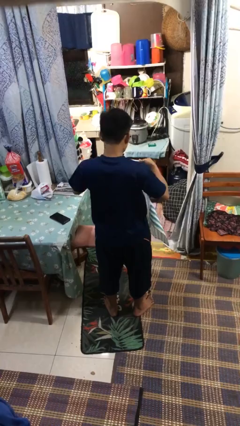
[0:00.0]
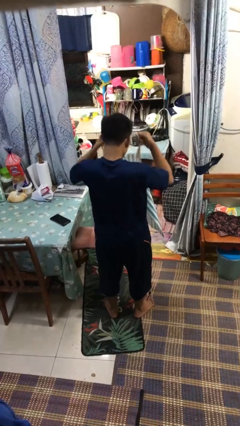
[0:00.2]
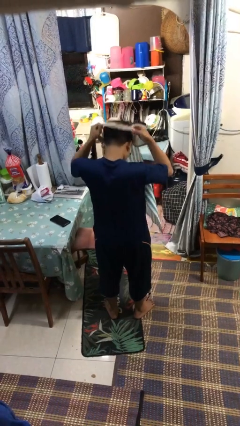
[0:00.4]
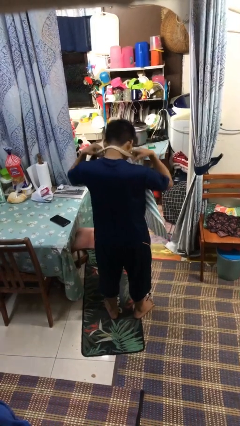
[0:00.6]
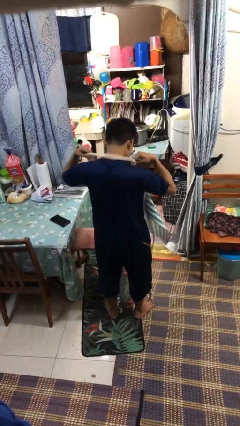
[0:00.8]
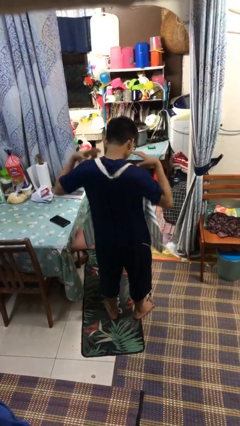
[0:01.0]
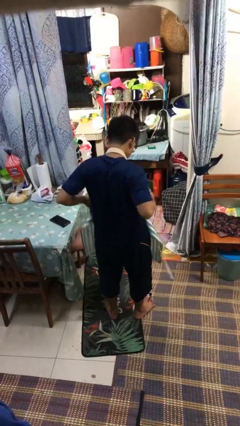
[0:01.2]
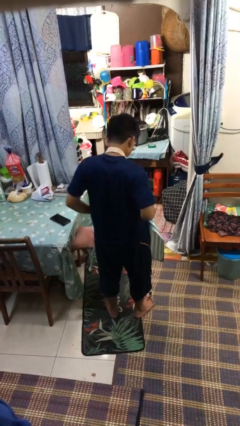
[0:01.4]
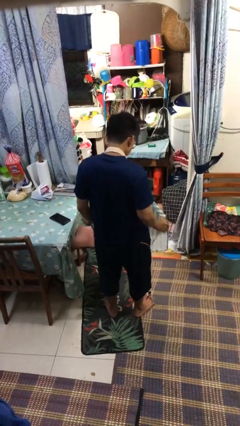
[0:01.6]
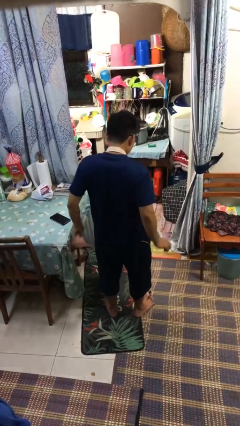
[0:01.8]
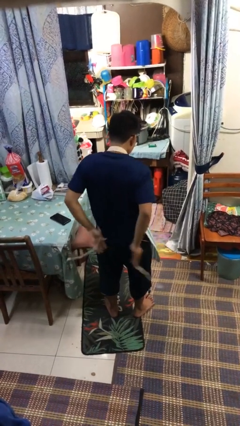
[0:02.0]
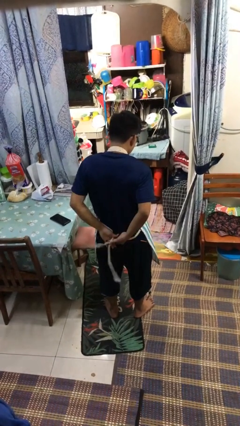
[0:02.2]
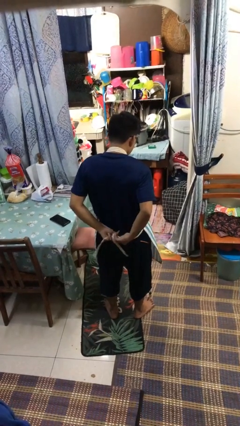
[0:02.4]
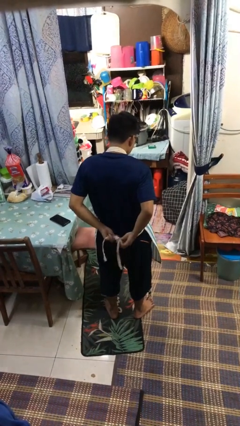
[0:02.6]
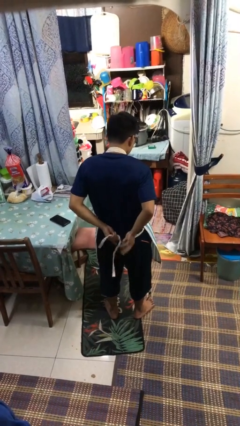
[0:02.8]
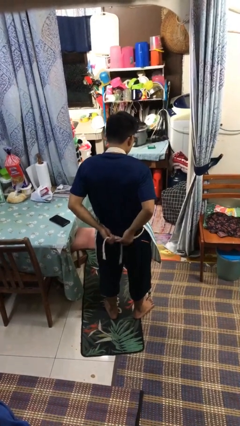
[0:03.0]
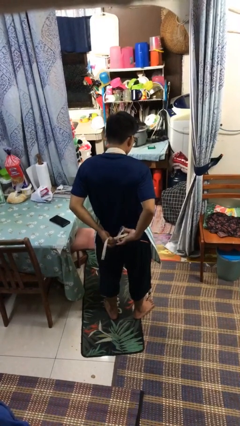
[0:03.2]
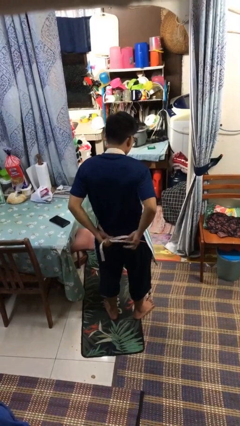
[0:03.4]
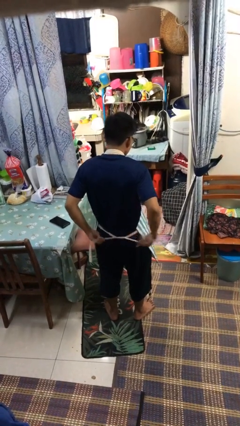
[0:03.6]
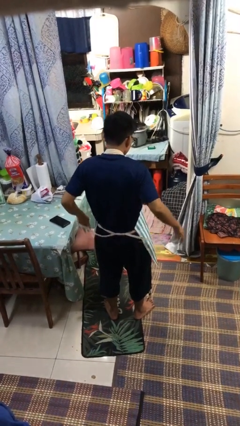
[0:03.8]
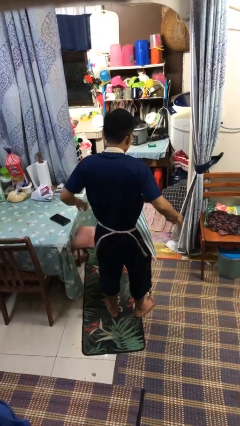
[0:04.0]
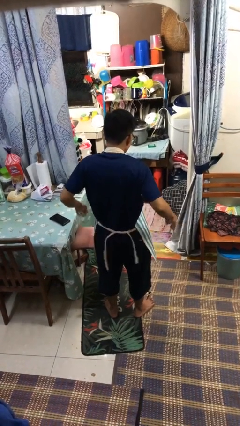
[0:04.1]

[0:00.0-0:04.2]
person puts on apron

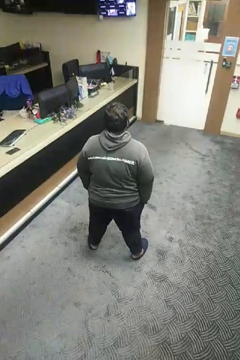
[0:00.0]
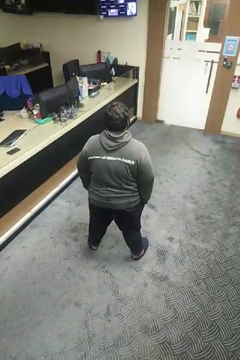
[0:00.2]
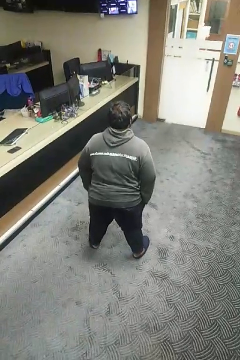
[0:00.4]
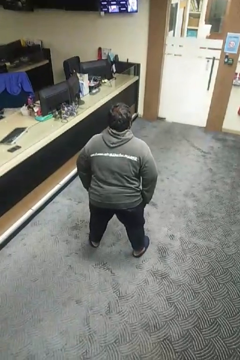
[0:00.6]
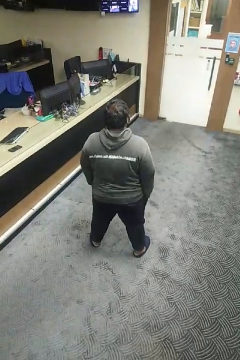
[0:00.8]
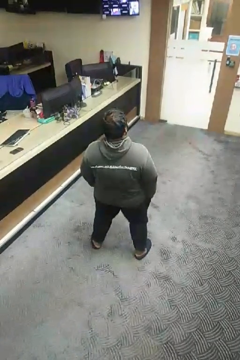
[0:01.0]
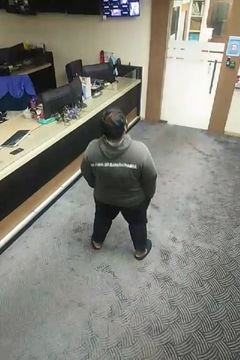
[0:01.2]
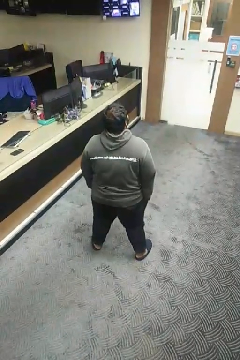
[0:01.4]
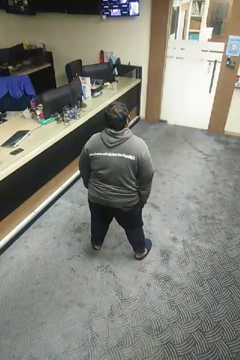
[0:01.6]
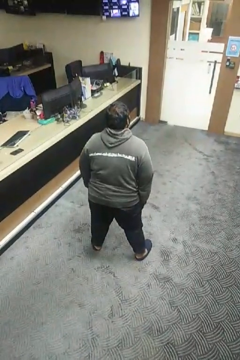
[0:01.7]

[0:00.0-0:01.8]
person wiggles hips

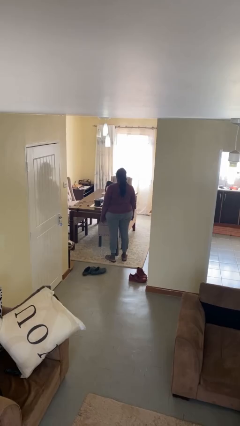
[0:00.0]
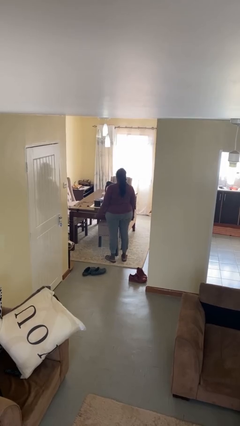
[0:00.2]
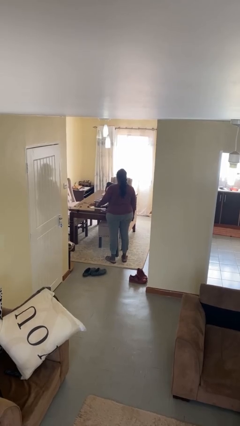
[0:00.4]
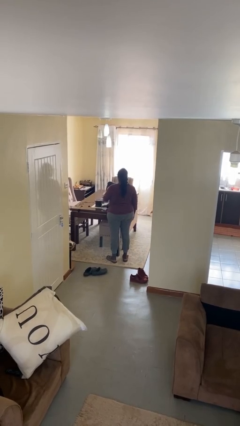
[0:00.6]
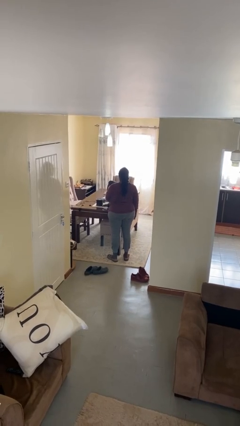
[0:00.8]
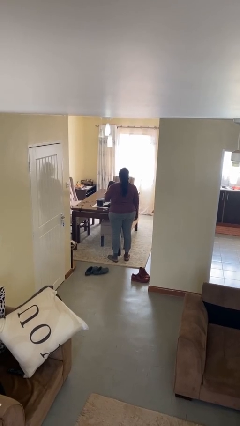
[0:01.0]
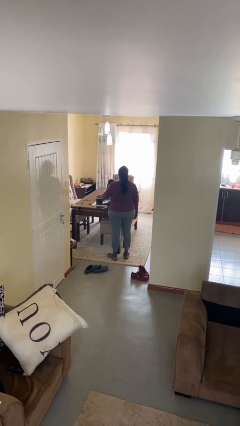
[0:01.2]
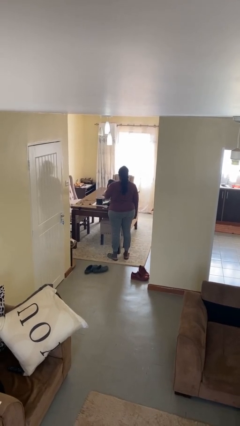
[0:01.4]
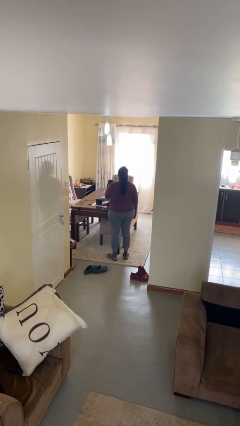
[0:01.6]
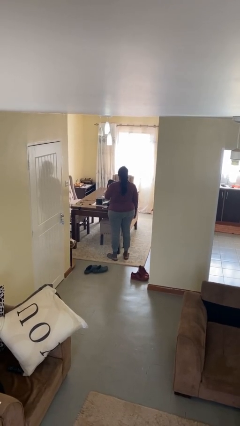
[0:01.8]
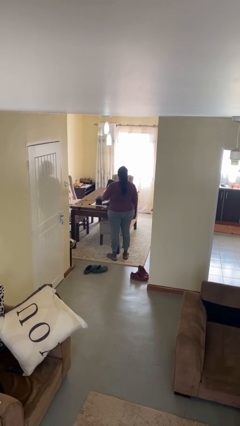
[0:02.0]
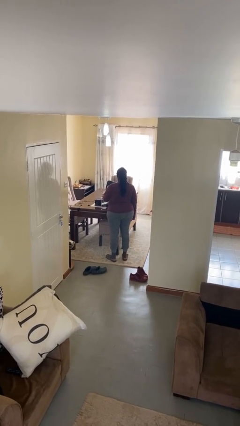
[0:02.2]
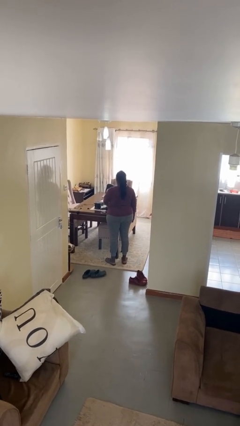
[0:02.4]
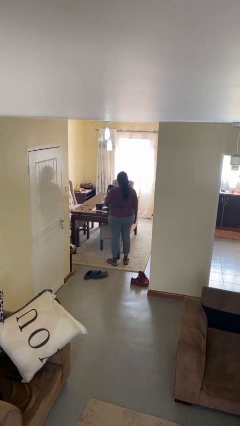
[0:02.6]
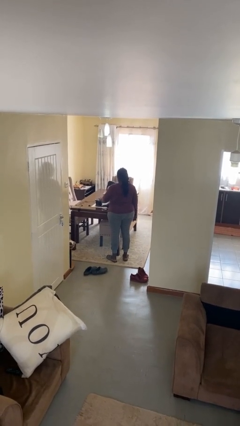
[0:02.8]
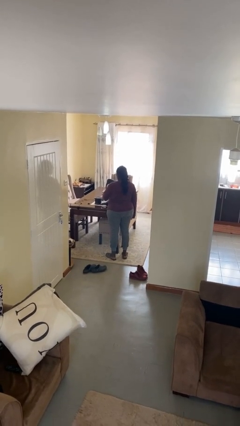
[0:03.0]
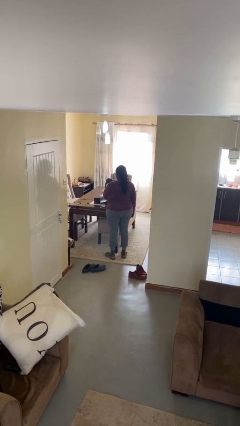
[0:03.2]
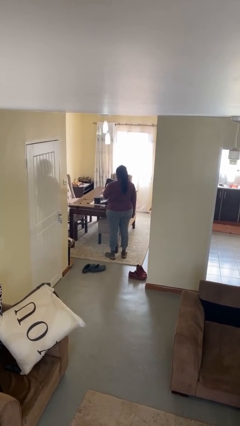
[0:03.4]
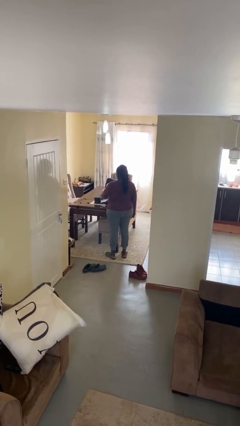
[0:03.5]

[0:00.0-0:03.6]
person waves hand over object

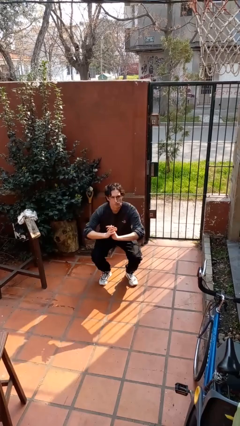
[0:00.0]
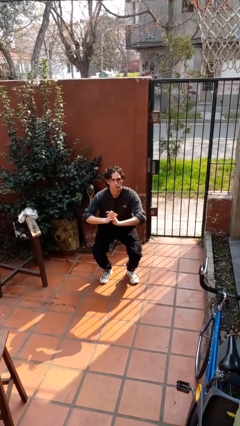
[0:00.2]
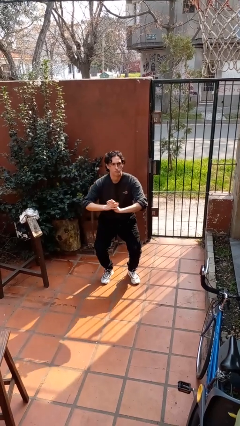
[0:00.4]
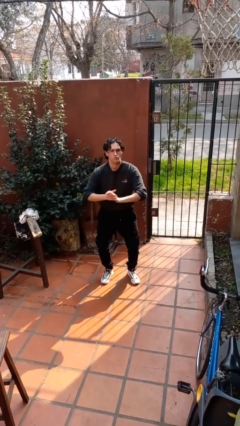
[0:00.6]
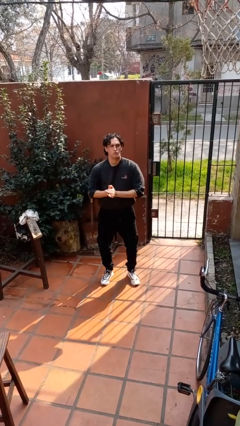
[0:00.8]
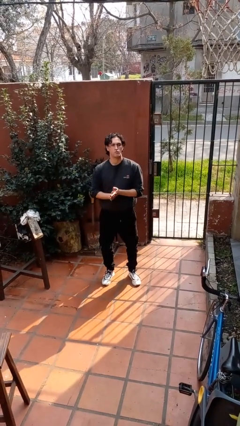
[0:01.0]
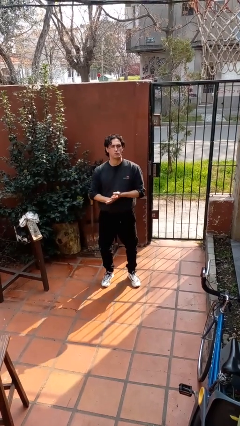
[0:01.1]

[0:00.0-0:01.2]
person stands up

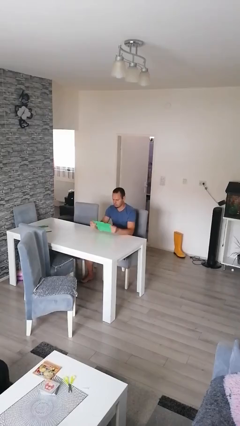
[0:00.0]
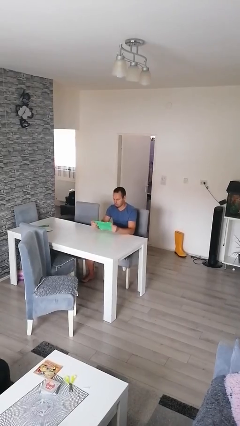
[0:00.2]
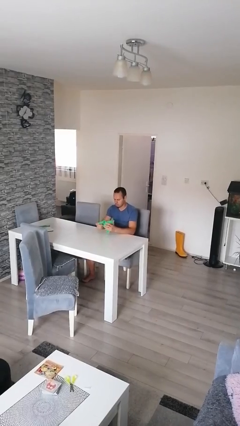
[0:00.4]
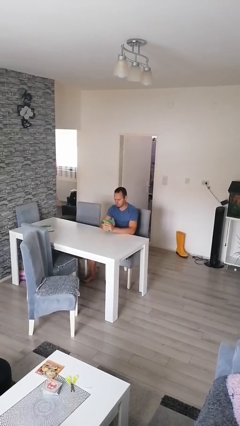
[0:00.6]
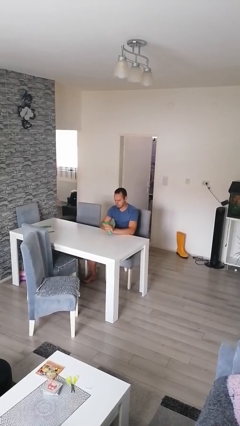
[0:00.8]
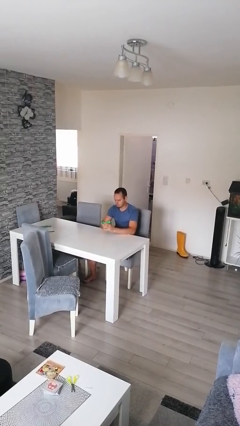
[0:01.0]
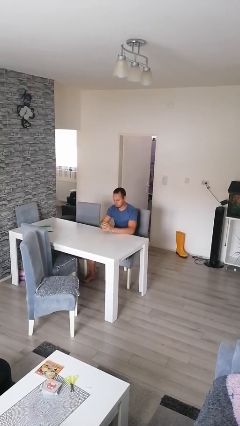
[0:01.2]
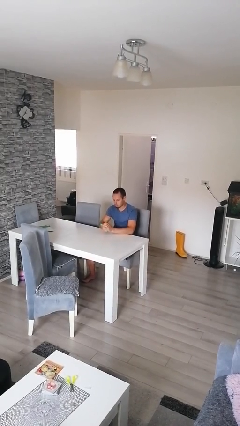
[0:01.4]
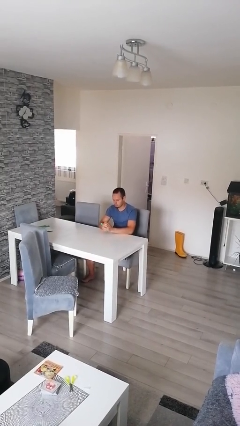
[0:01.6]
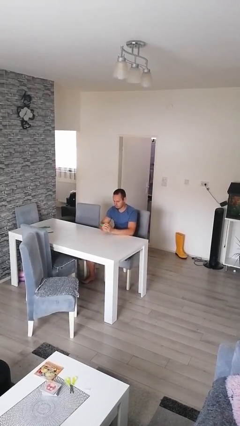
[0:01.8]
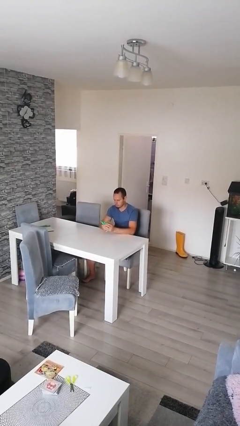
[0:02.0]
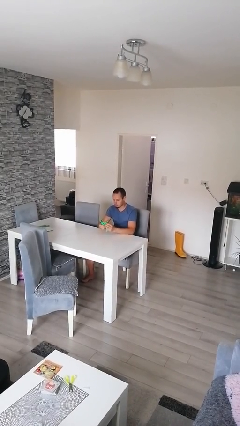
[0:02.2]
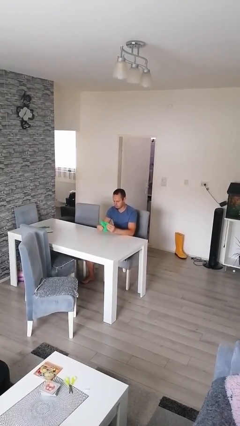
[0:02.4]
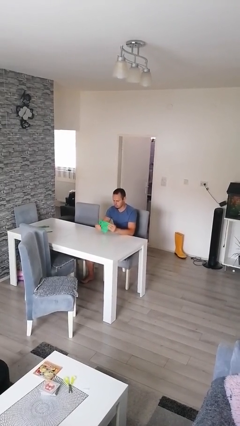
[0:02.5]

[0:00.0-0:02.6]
person crumples paper

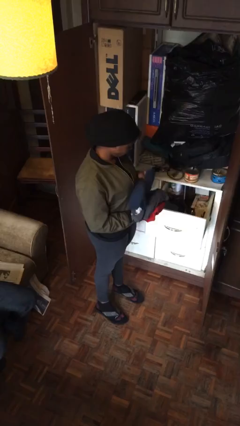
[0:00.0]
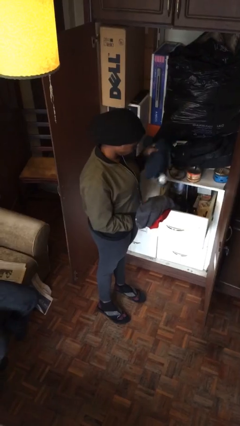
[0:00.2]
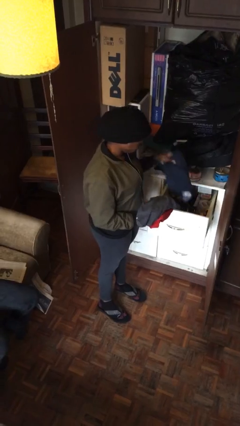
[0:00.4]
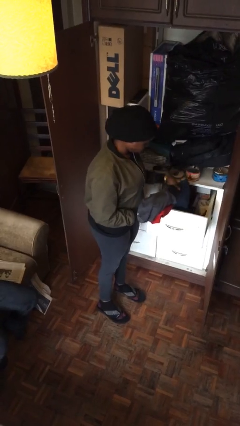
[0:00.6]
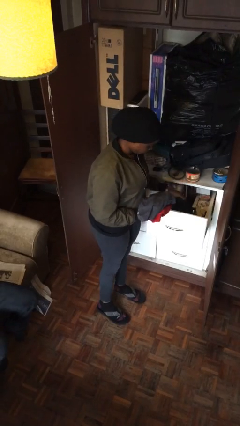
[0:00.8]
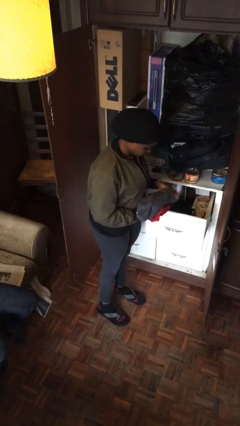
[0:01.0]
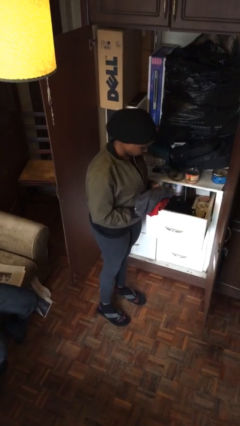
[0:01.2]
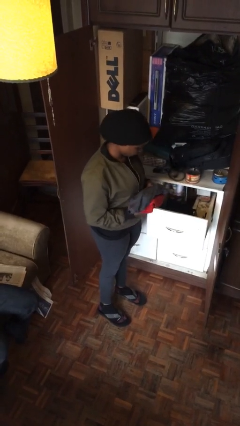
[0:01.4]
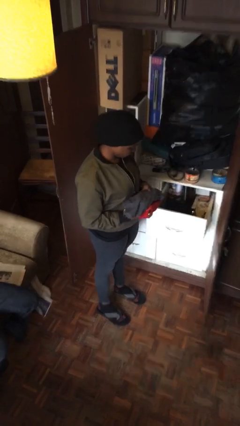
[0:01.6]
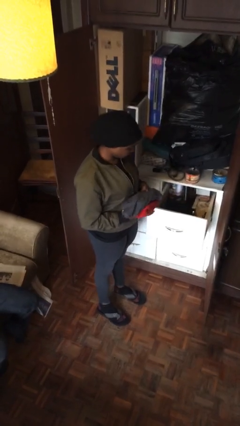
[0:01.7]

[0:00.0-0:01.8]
person puts clothes into dresser

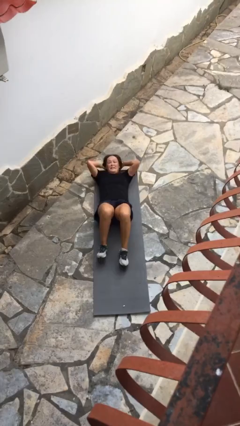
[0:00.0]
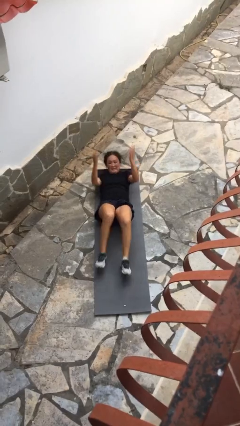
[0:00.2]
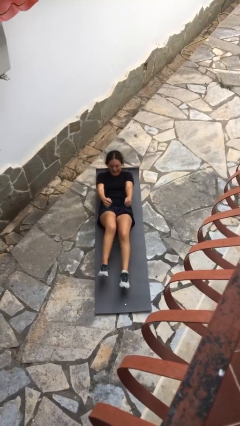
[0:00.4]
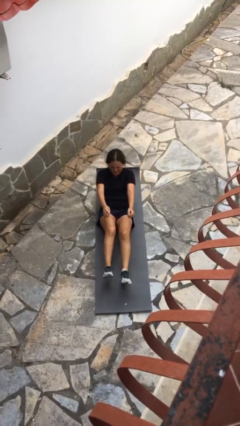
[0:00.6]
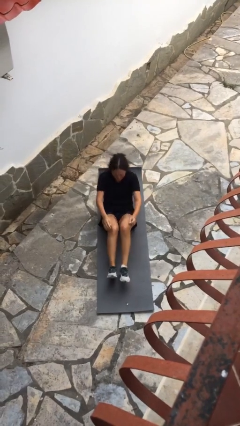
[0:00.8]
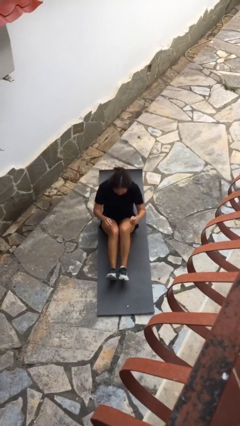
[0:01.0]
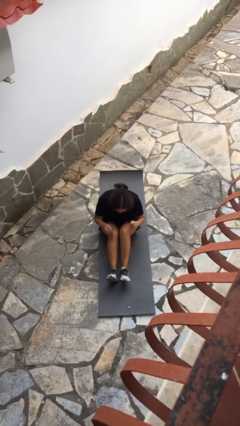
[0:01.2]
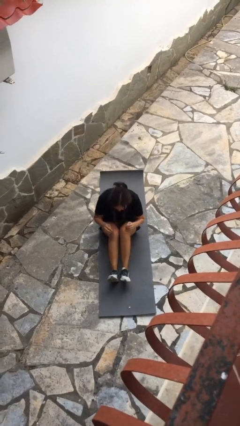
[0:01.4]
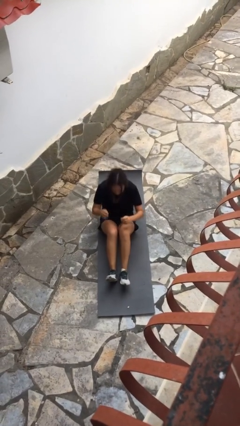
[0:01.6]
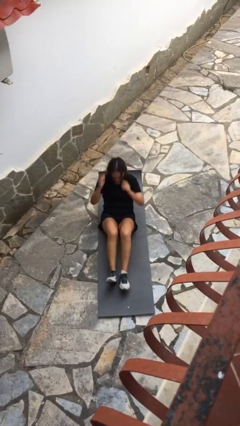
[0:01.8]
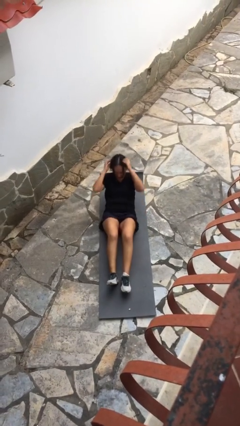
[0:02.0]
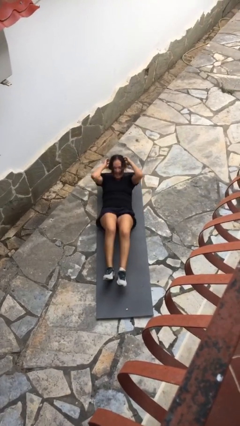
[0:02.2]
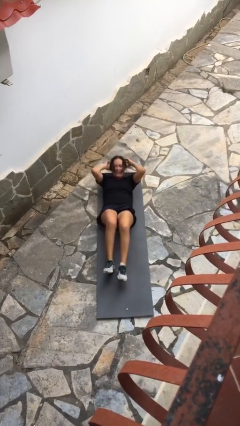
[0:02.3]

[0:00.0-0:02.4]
person exercises with situp
